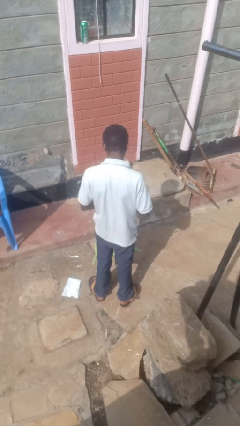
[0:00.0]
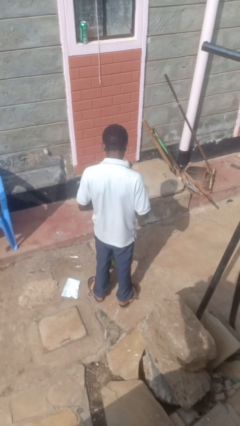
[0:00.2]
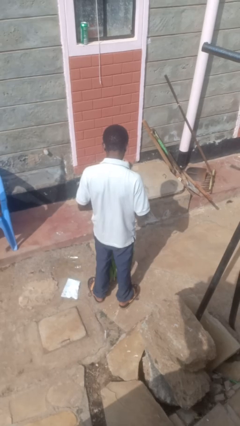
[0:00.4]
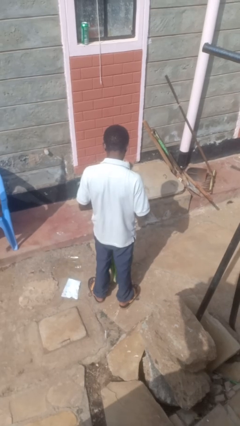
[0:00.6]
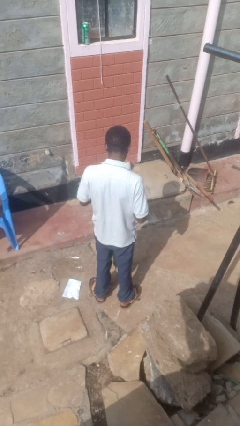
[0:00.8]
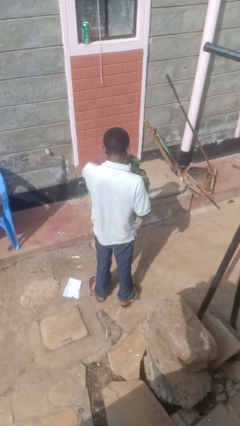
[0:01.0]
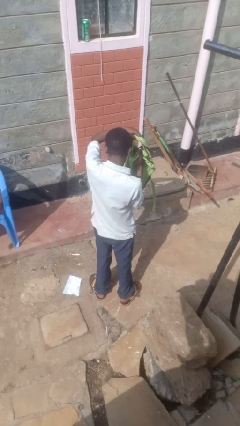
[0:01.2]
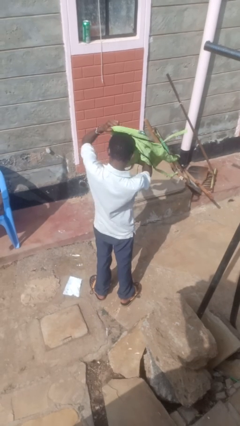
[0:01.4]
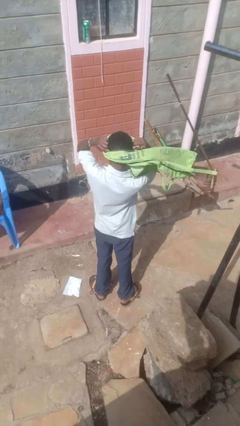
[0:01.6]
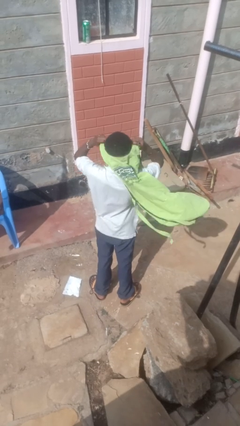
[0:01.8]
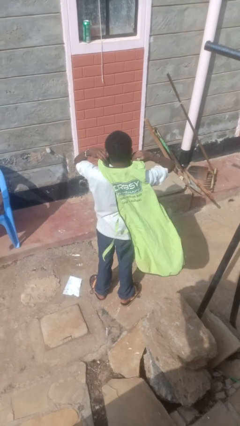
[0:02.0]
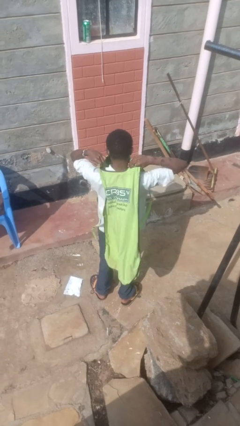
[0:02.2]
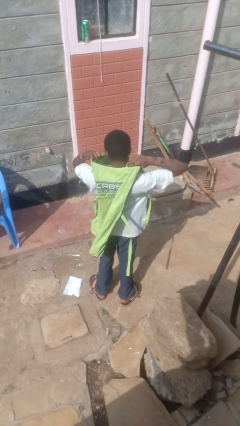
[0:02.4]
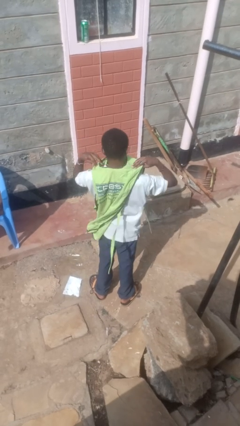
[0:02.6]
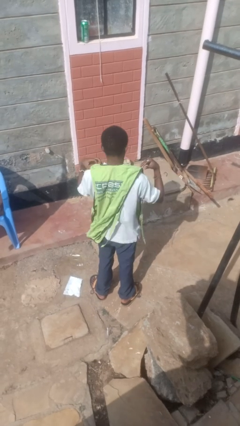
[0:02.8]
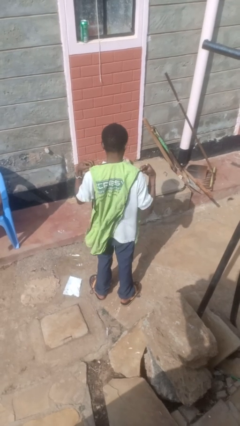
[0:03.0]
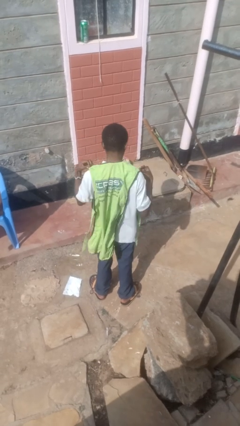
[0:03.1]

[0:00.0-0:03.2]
person puts on apron

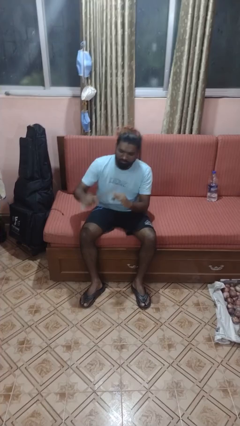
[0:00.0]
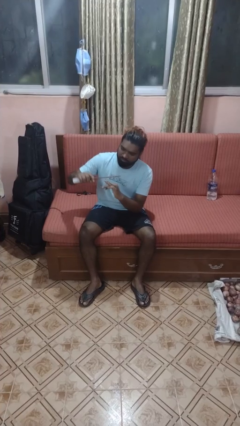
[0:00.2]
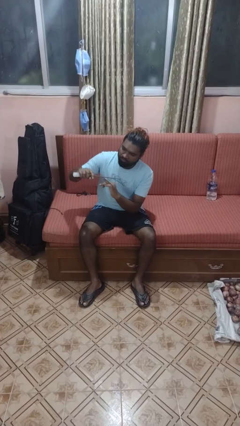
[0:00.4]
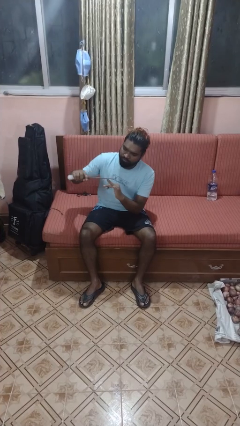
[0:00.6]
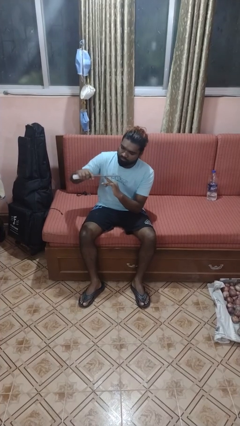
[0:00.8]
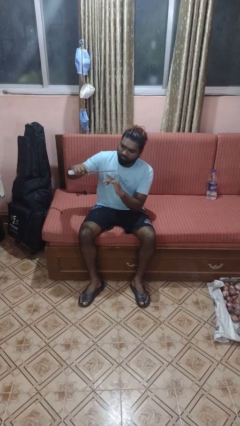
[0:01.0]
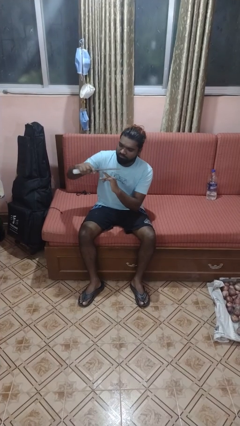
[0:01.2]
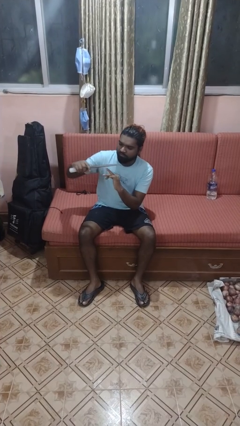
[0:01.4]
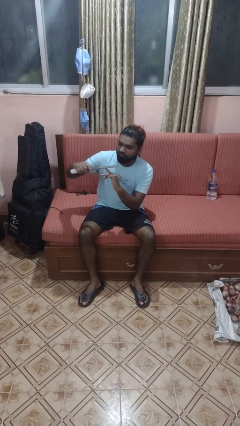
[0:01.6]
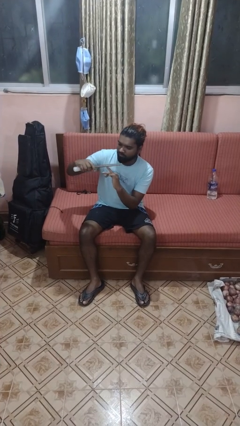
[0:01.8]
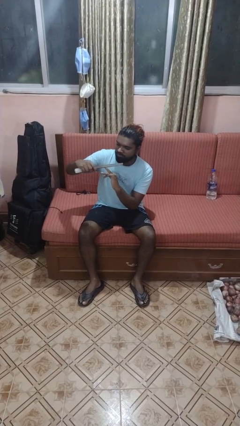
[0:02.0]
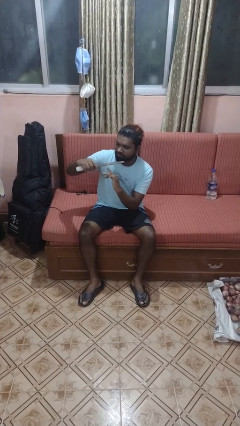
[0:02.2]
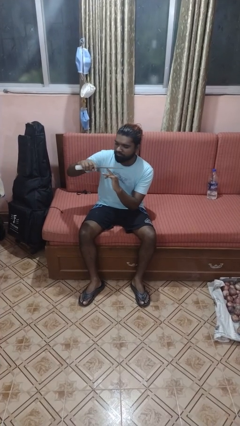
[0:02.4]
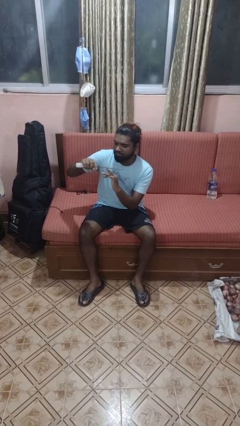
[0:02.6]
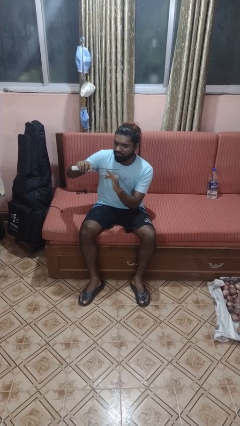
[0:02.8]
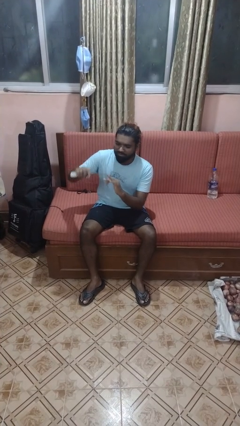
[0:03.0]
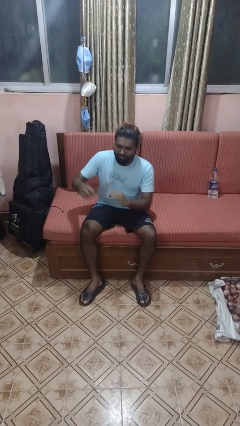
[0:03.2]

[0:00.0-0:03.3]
person files fingernails

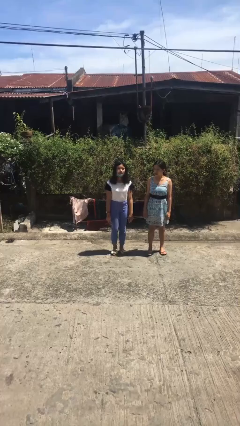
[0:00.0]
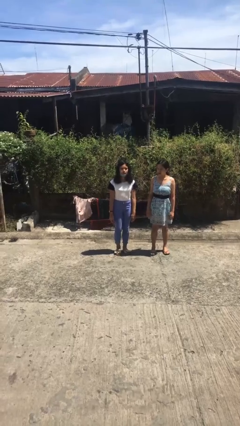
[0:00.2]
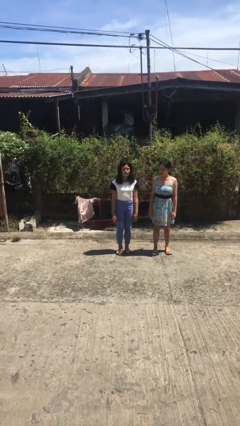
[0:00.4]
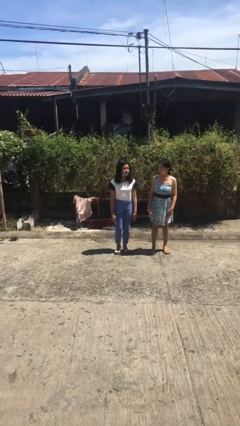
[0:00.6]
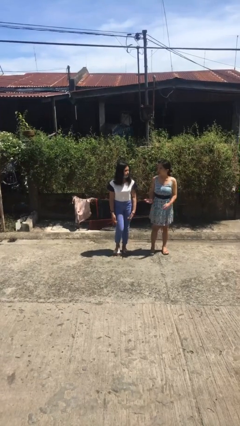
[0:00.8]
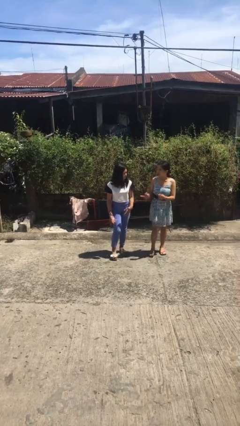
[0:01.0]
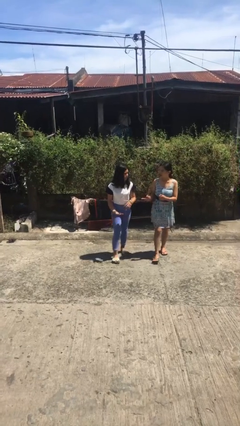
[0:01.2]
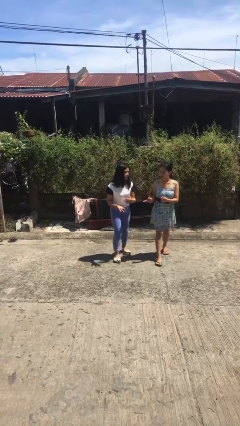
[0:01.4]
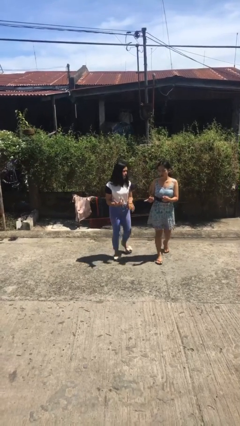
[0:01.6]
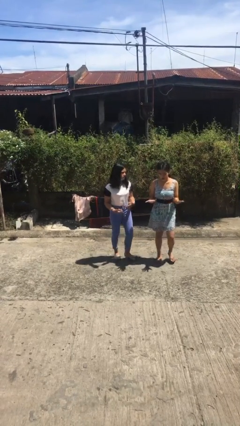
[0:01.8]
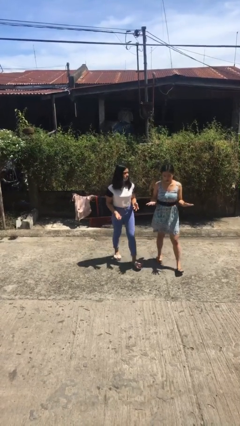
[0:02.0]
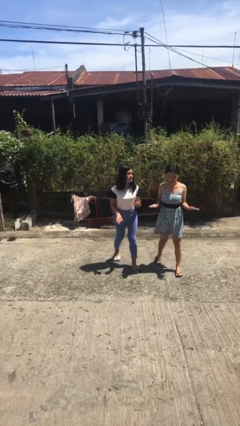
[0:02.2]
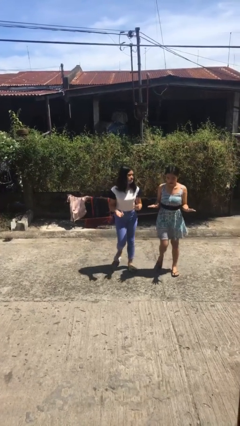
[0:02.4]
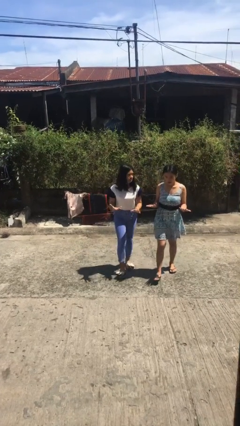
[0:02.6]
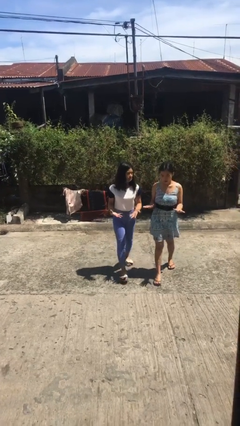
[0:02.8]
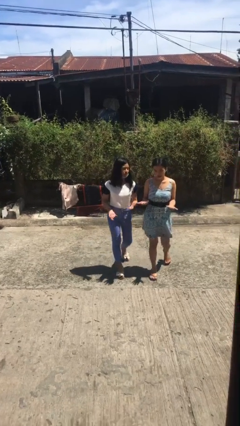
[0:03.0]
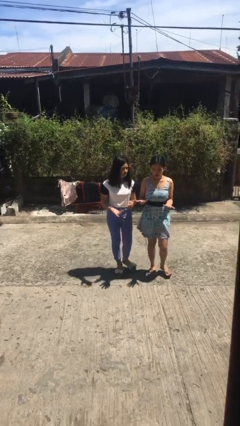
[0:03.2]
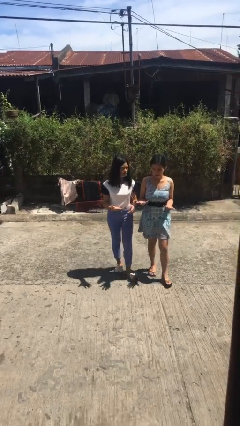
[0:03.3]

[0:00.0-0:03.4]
person talks to person

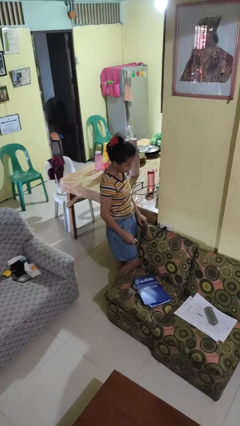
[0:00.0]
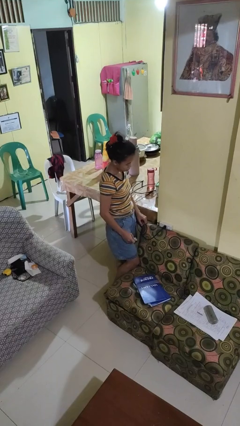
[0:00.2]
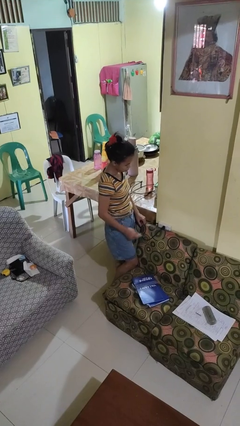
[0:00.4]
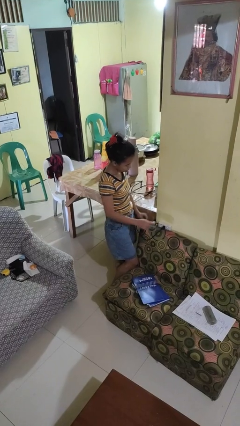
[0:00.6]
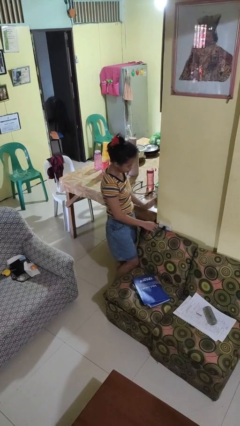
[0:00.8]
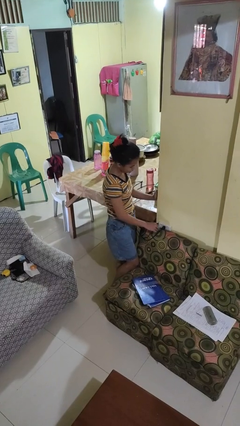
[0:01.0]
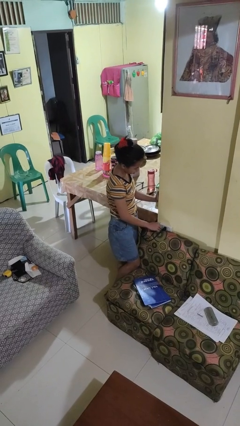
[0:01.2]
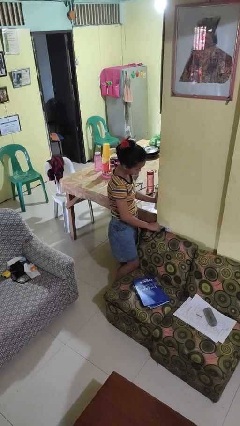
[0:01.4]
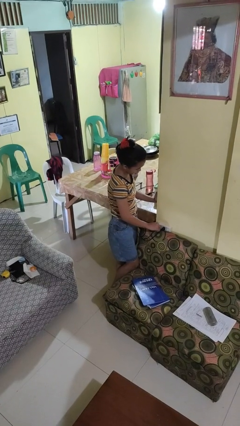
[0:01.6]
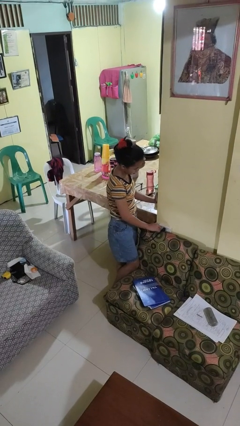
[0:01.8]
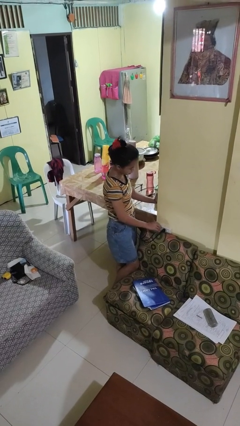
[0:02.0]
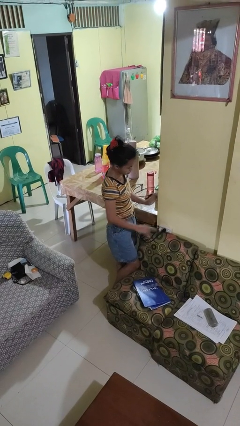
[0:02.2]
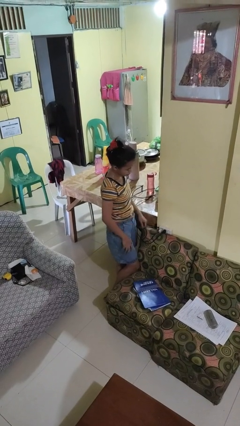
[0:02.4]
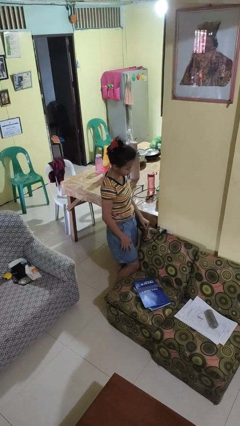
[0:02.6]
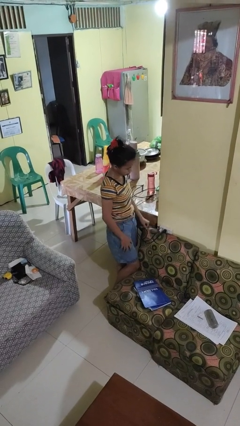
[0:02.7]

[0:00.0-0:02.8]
person plugs into electrical socket

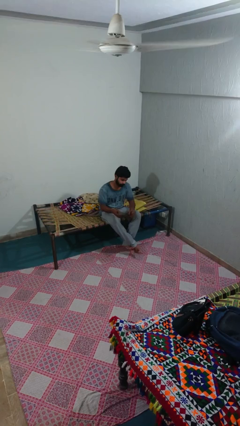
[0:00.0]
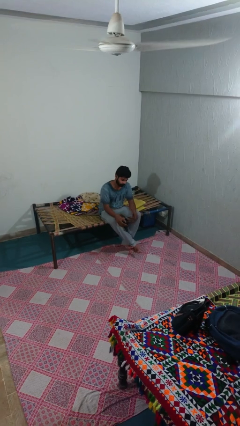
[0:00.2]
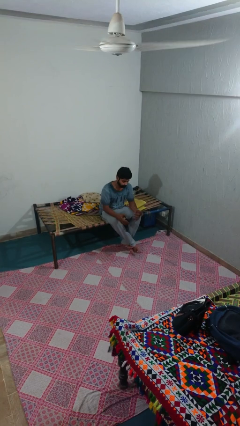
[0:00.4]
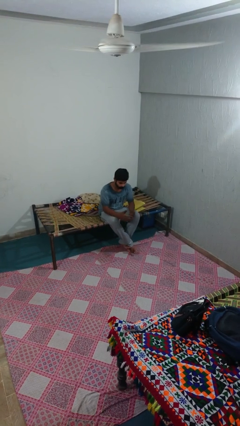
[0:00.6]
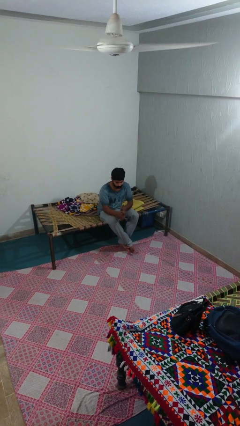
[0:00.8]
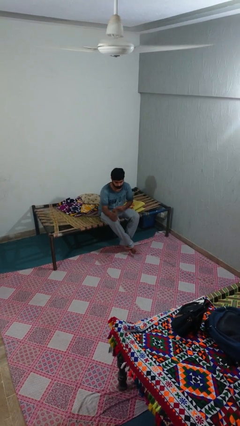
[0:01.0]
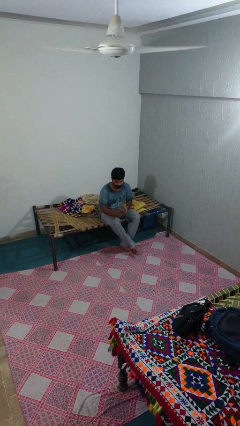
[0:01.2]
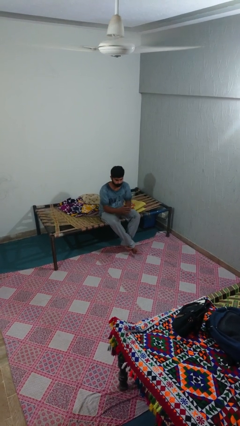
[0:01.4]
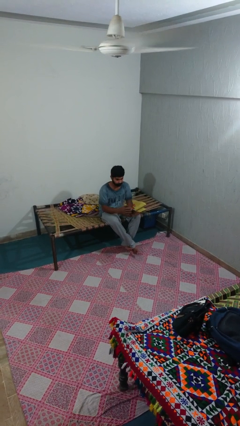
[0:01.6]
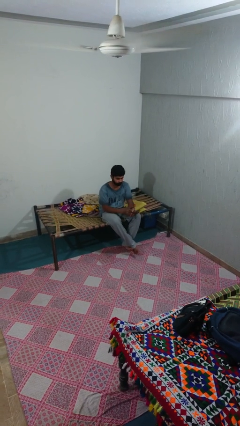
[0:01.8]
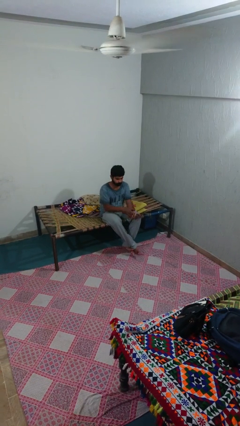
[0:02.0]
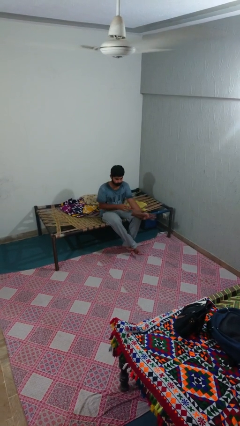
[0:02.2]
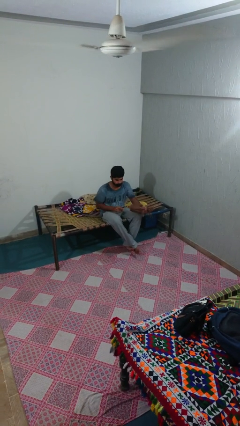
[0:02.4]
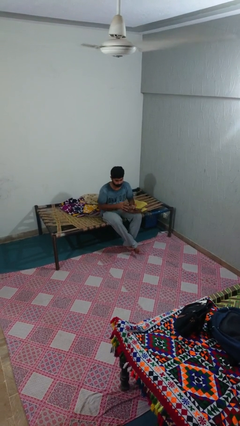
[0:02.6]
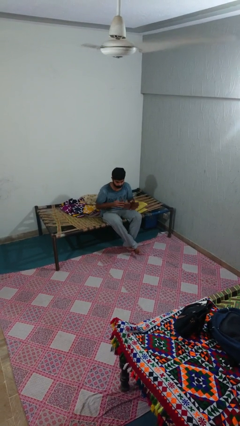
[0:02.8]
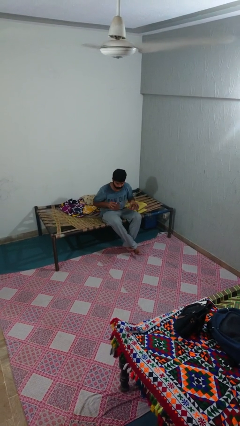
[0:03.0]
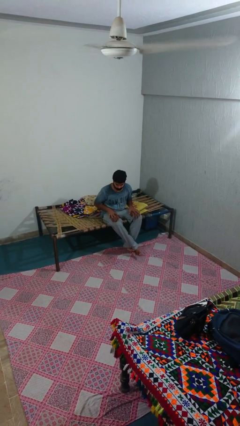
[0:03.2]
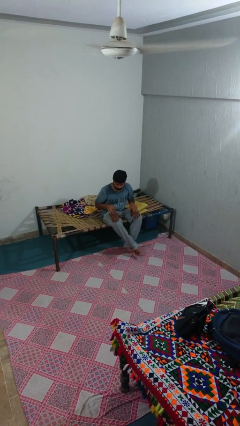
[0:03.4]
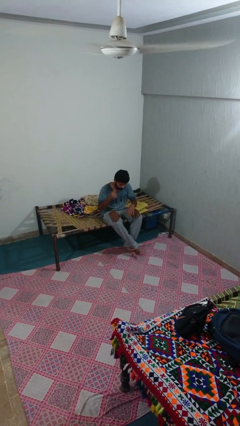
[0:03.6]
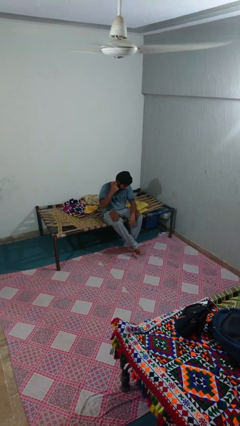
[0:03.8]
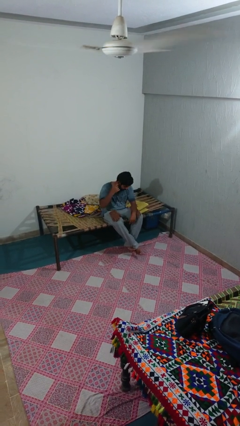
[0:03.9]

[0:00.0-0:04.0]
person takes off gloves

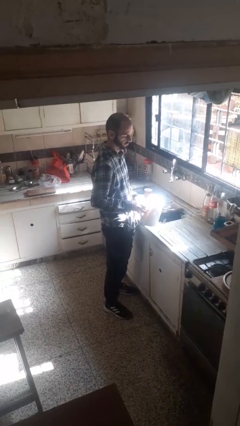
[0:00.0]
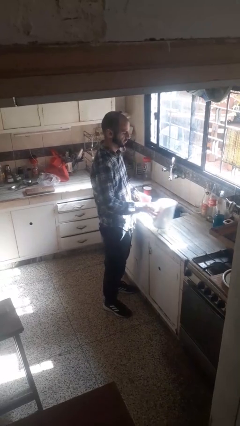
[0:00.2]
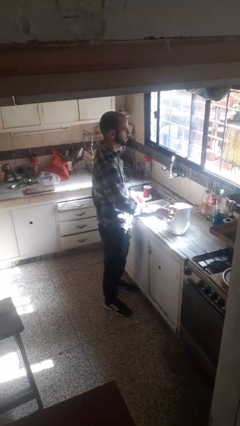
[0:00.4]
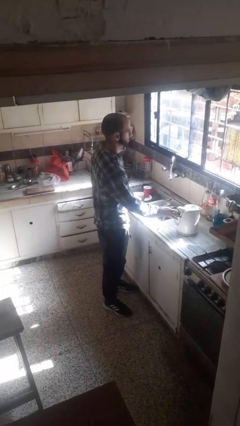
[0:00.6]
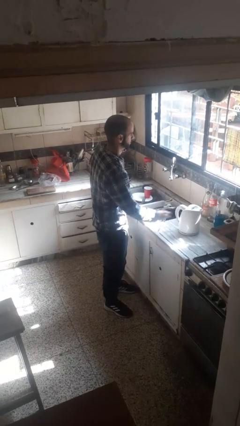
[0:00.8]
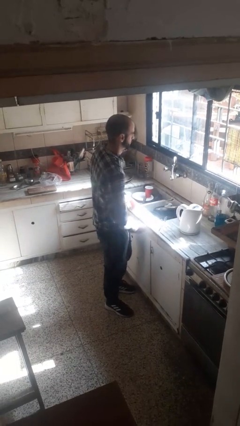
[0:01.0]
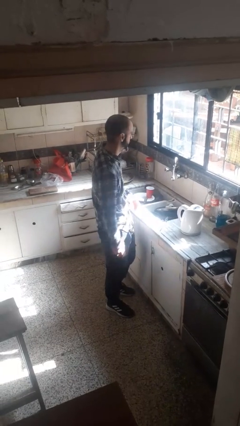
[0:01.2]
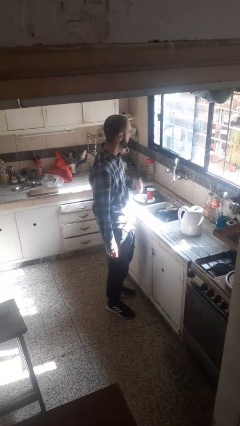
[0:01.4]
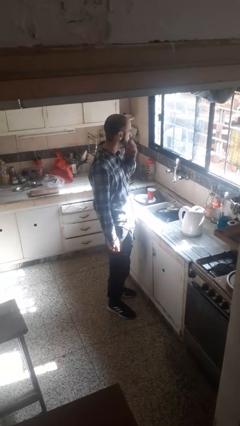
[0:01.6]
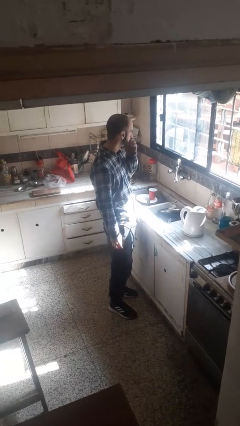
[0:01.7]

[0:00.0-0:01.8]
person puts down object on countertop
